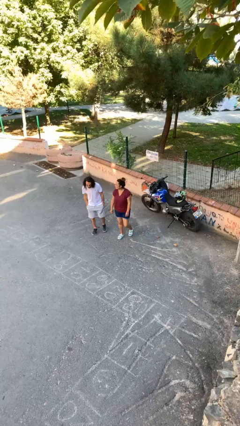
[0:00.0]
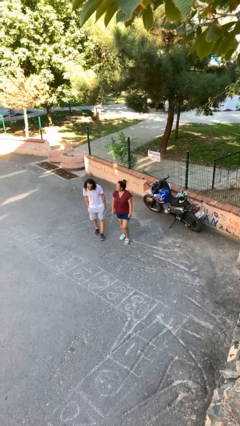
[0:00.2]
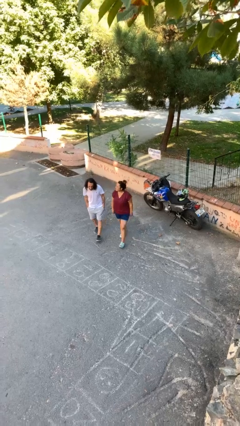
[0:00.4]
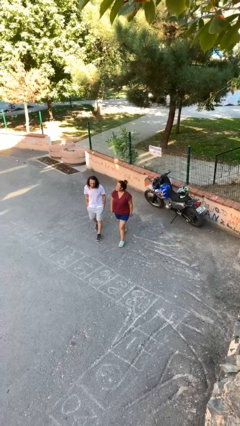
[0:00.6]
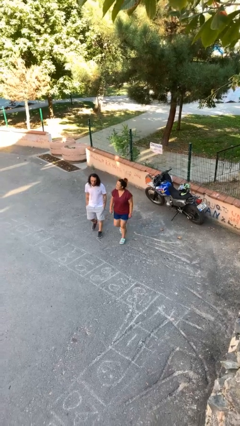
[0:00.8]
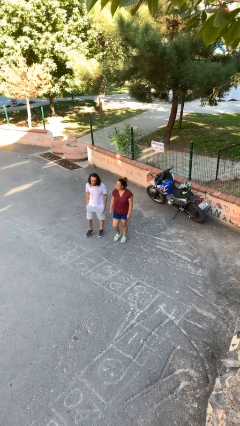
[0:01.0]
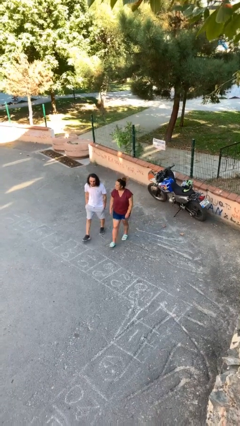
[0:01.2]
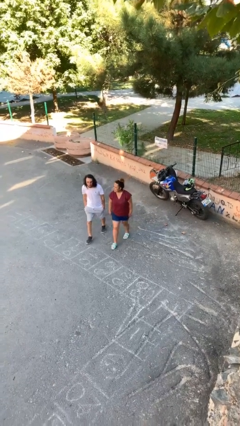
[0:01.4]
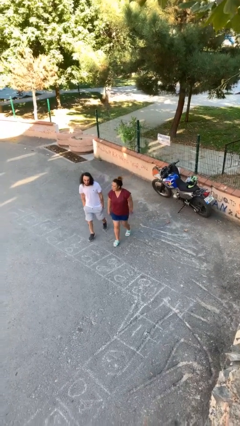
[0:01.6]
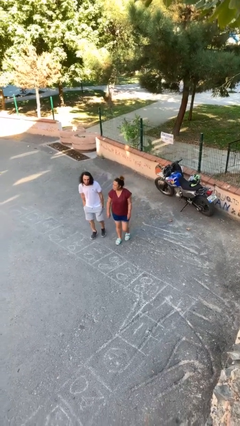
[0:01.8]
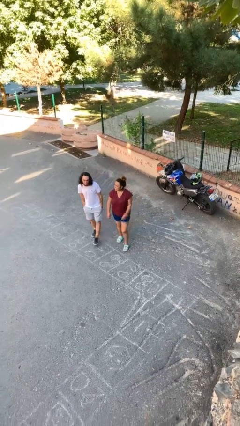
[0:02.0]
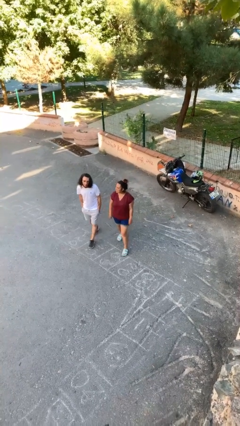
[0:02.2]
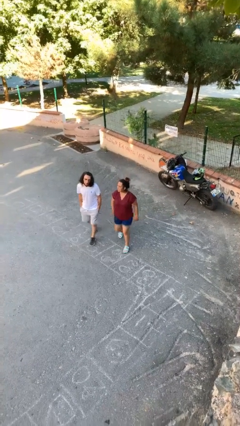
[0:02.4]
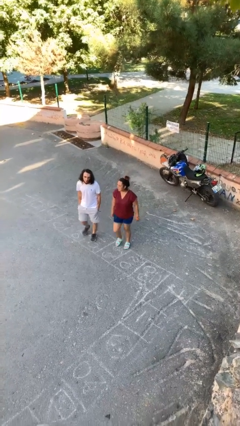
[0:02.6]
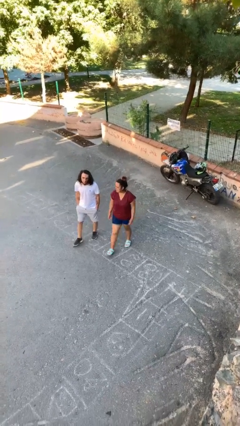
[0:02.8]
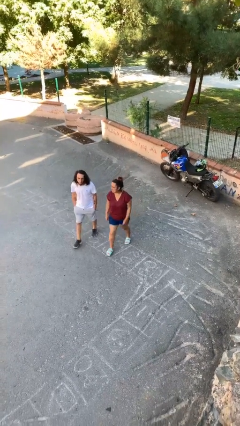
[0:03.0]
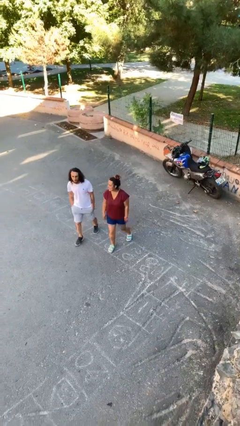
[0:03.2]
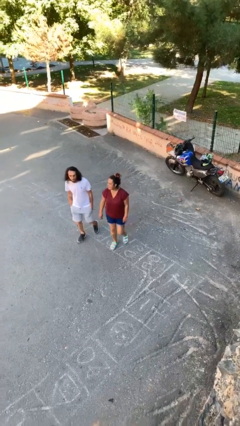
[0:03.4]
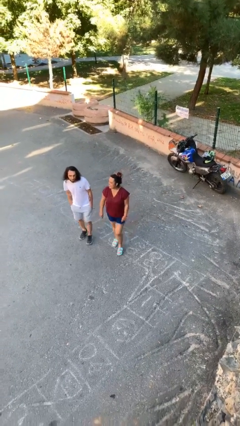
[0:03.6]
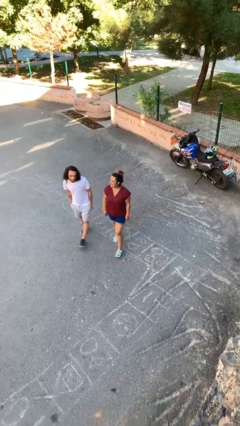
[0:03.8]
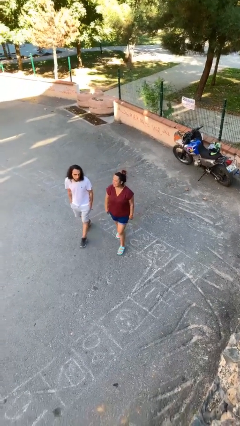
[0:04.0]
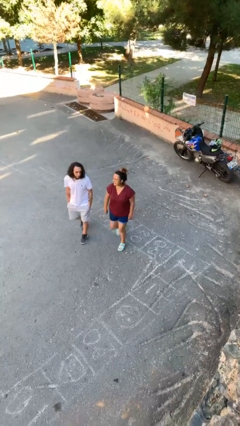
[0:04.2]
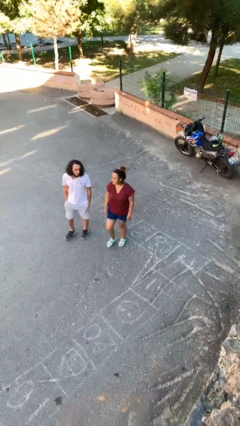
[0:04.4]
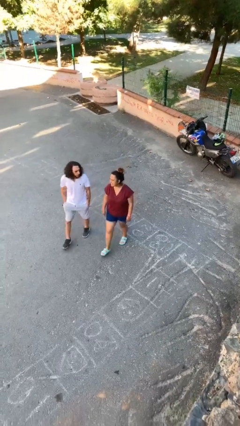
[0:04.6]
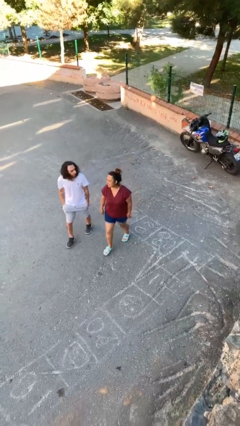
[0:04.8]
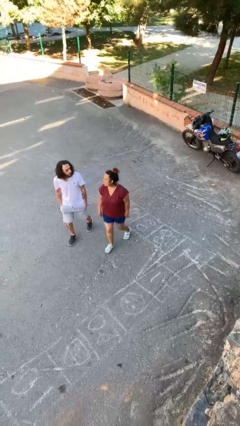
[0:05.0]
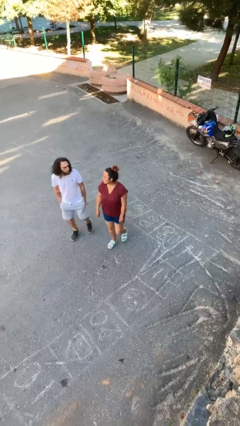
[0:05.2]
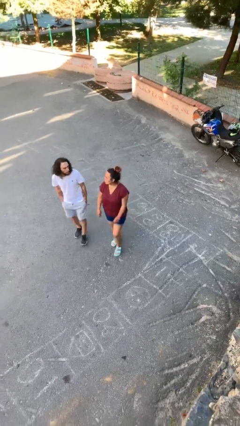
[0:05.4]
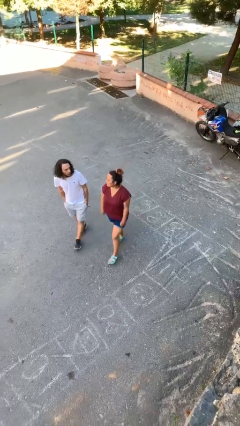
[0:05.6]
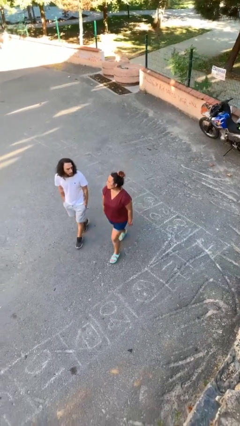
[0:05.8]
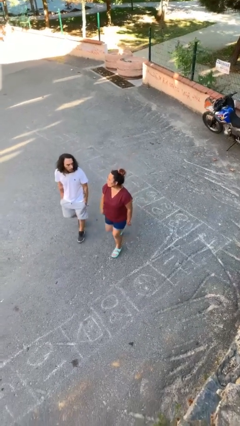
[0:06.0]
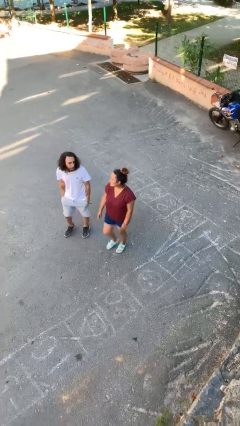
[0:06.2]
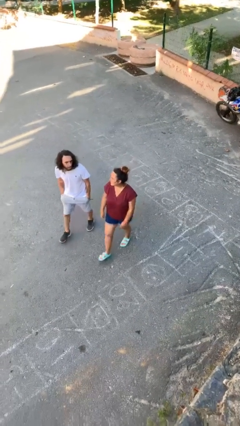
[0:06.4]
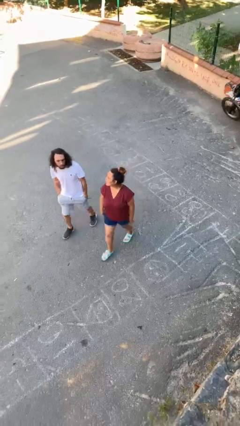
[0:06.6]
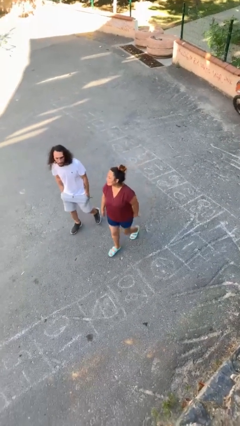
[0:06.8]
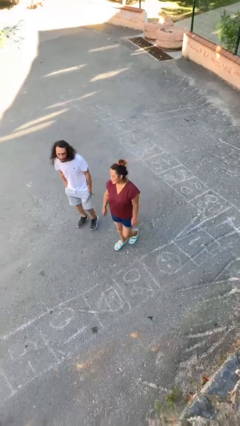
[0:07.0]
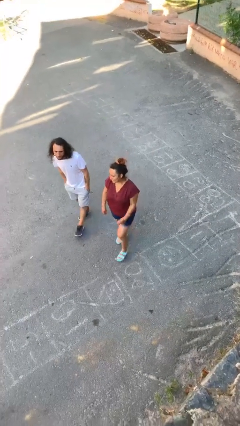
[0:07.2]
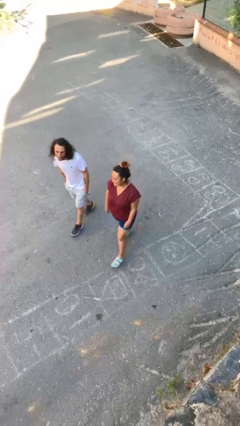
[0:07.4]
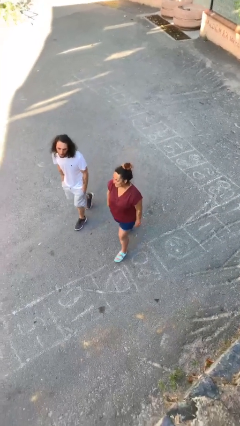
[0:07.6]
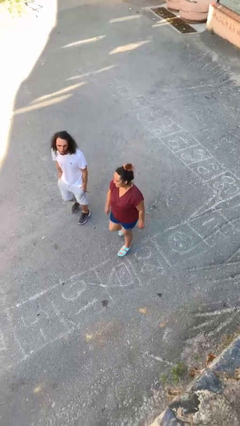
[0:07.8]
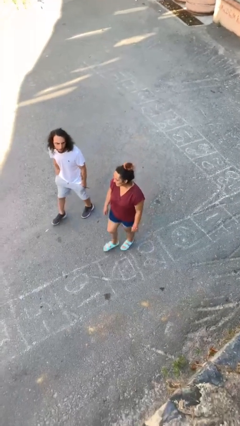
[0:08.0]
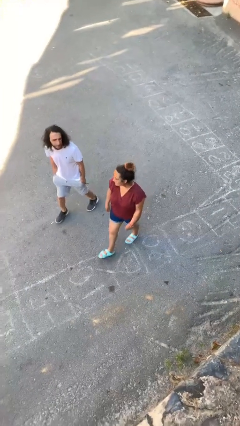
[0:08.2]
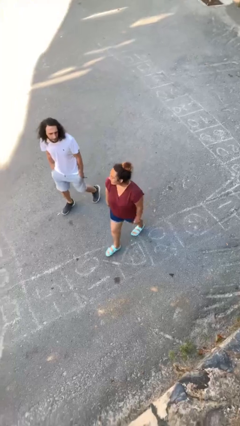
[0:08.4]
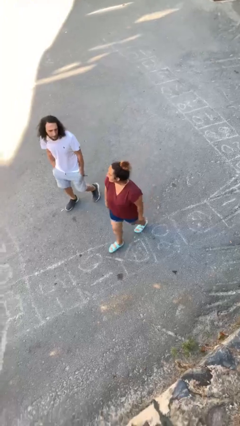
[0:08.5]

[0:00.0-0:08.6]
person talks to person

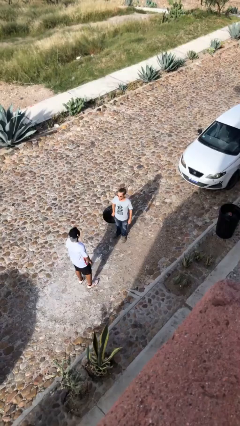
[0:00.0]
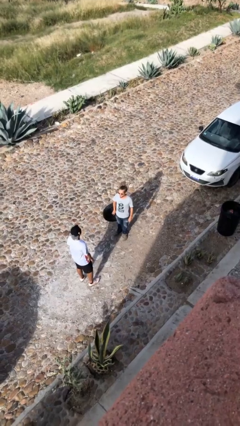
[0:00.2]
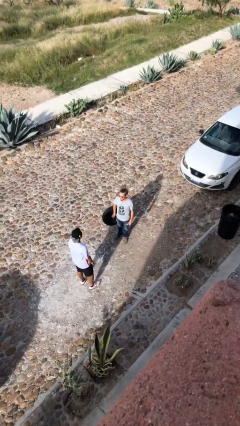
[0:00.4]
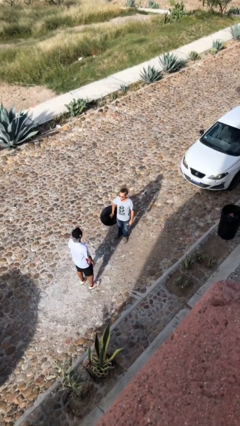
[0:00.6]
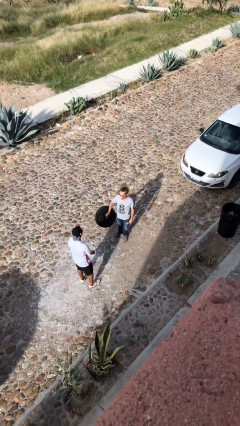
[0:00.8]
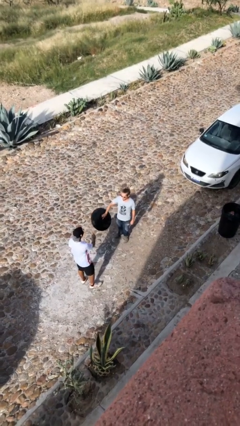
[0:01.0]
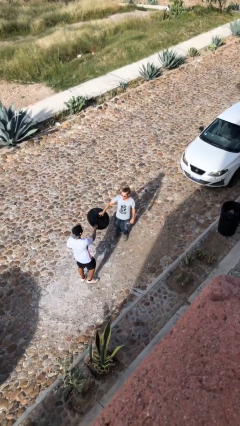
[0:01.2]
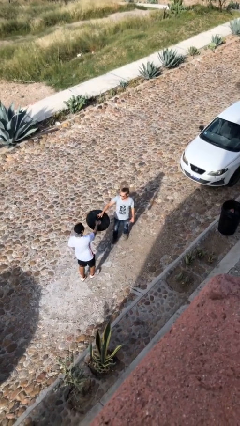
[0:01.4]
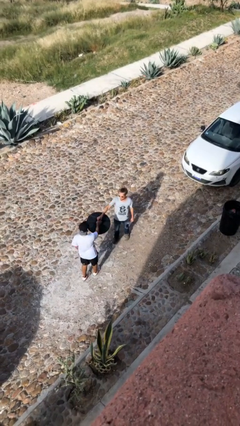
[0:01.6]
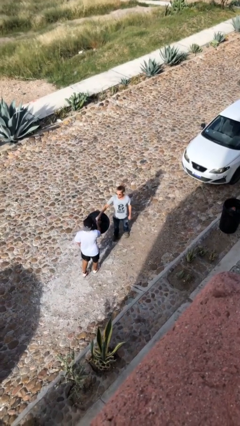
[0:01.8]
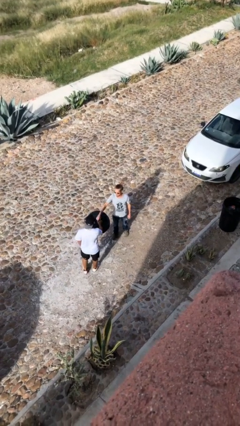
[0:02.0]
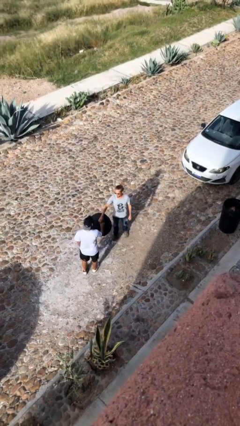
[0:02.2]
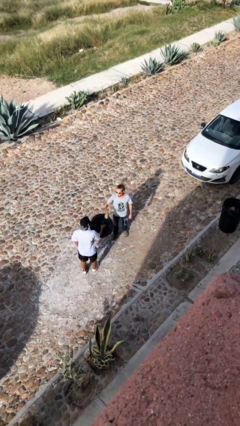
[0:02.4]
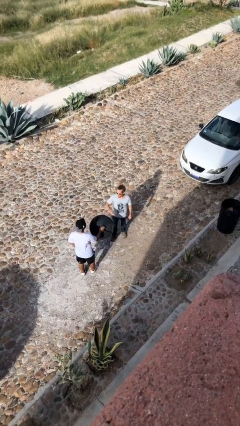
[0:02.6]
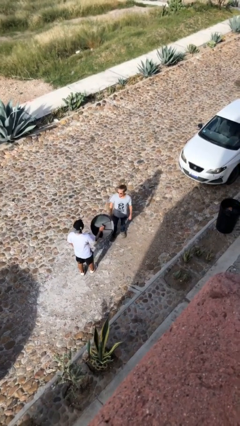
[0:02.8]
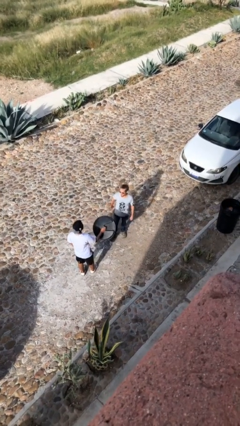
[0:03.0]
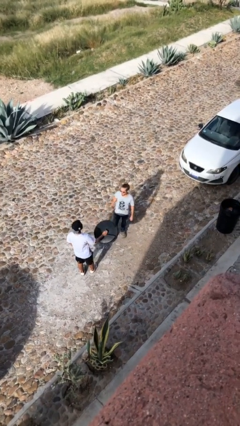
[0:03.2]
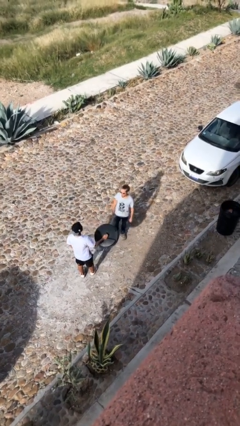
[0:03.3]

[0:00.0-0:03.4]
person transfers object to person

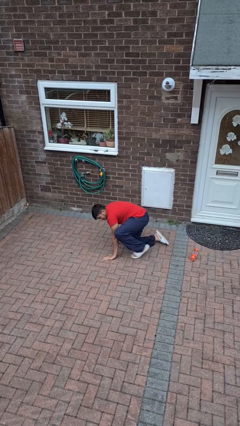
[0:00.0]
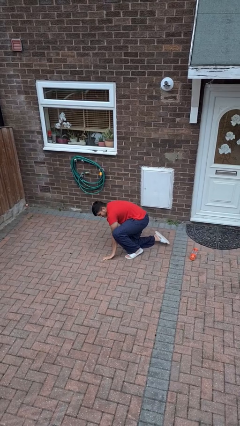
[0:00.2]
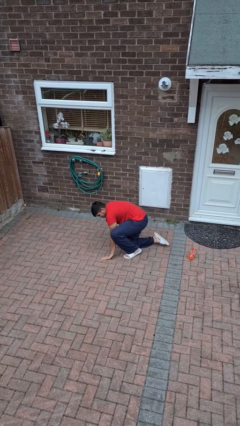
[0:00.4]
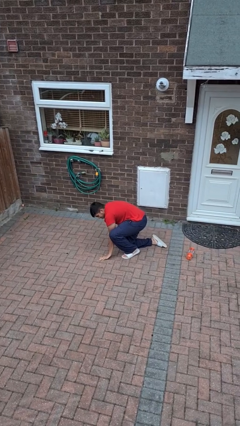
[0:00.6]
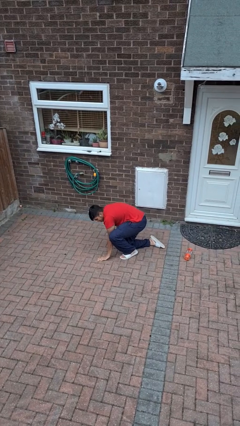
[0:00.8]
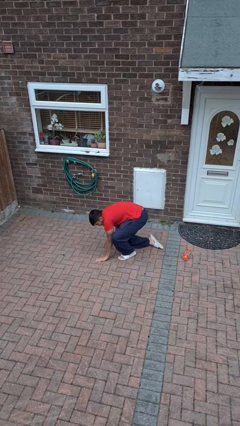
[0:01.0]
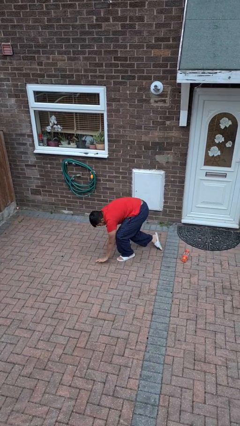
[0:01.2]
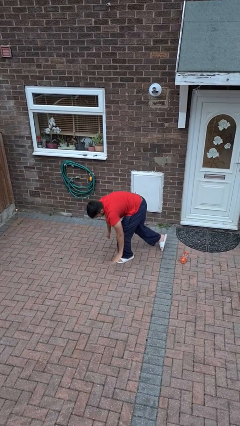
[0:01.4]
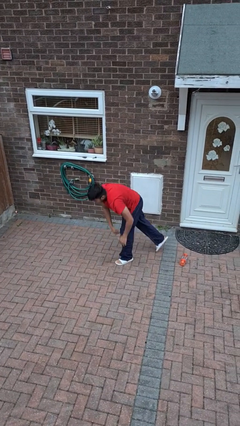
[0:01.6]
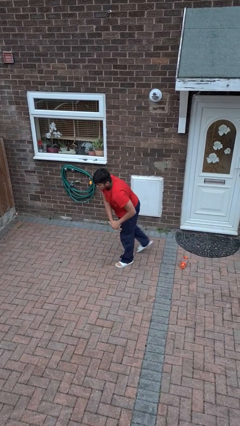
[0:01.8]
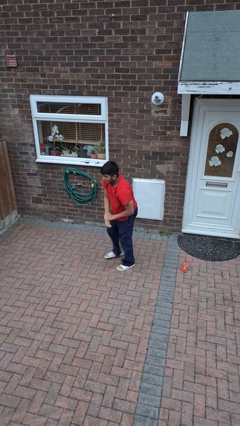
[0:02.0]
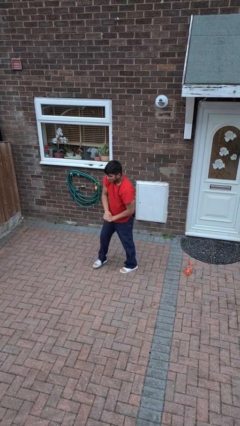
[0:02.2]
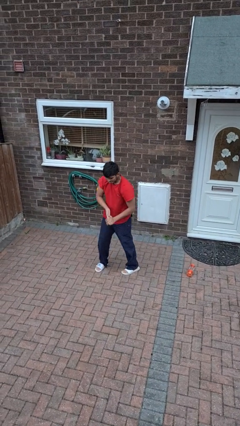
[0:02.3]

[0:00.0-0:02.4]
person stands up from floor

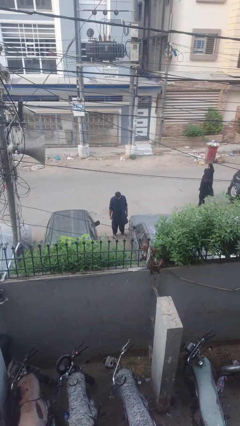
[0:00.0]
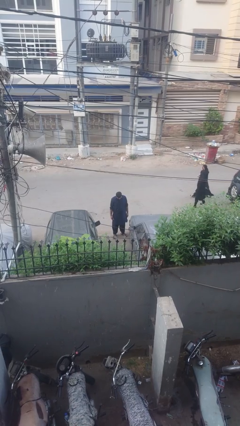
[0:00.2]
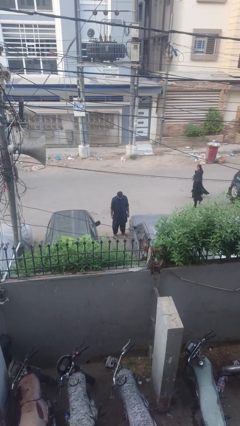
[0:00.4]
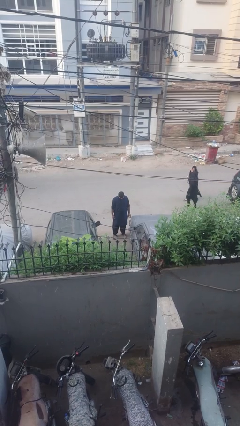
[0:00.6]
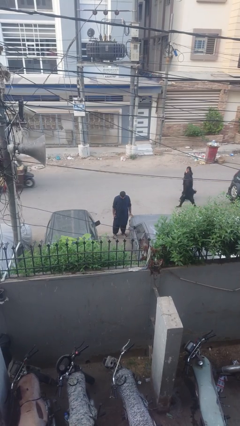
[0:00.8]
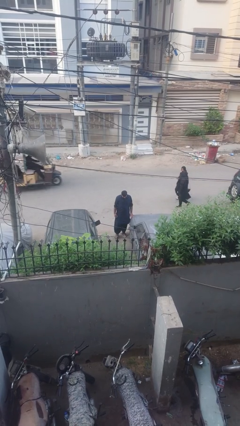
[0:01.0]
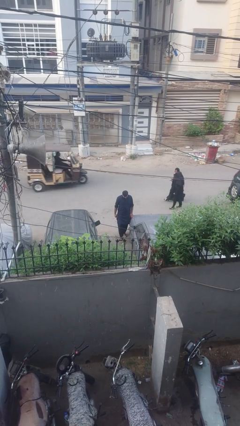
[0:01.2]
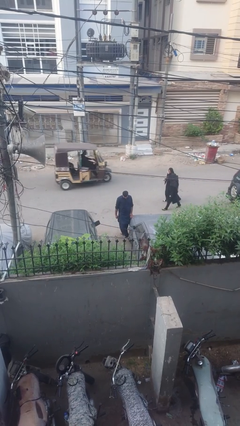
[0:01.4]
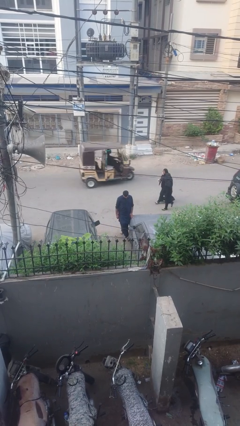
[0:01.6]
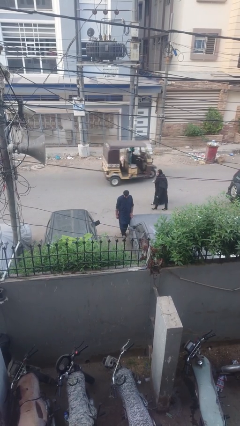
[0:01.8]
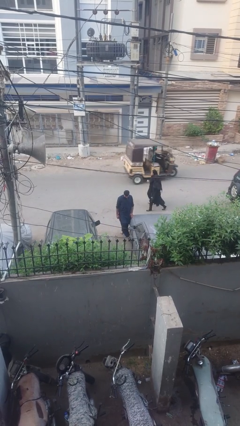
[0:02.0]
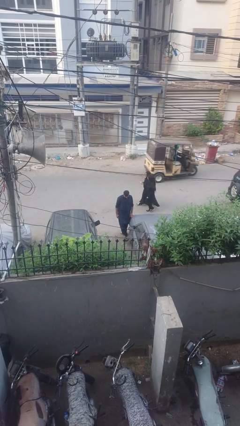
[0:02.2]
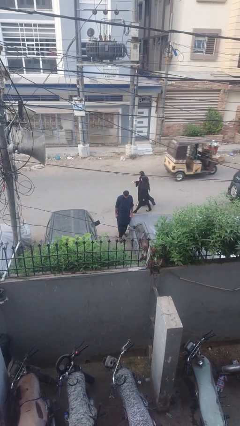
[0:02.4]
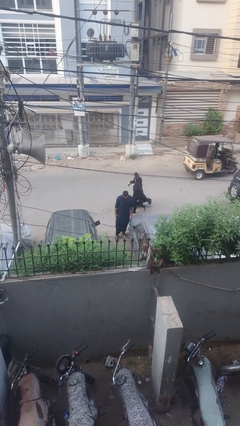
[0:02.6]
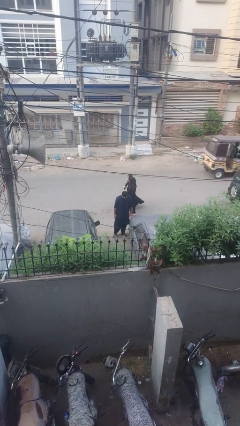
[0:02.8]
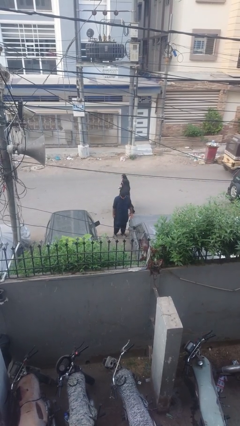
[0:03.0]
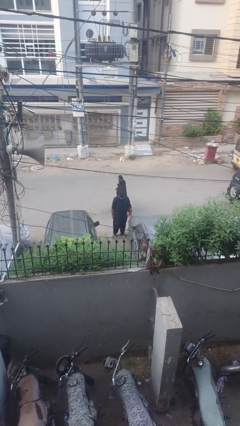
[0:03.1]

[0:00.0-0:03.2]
person kicks car tires
